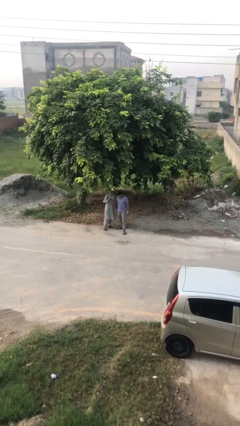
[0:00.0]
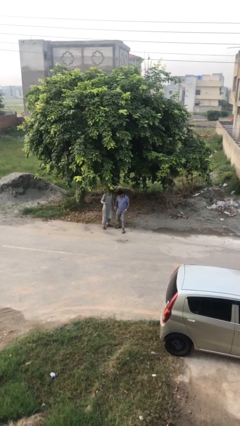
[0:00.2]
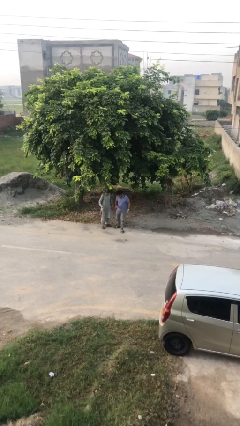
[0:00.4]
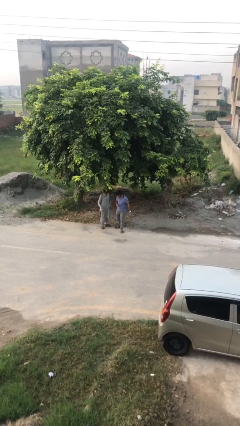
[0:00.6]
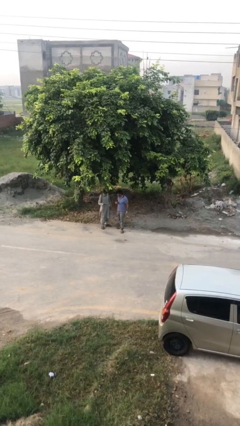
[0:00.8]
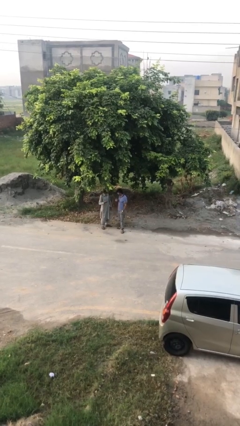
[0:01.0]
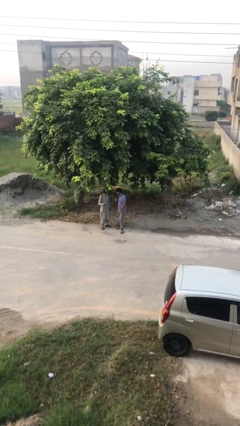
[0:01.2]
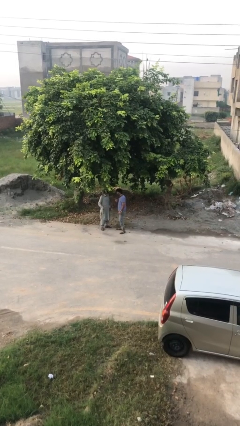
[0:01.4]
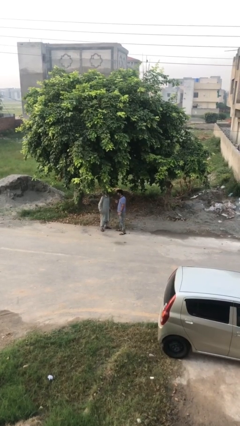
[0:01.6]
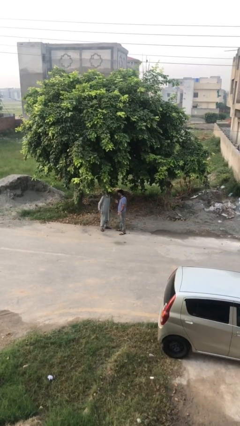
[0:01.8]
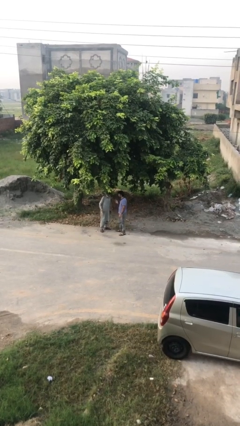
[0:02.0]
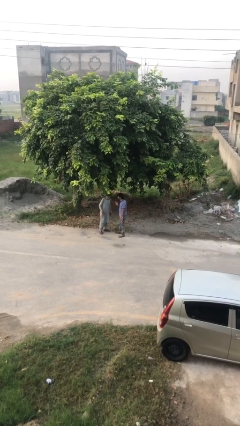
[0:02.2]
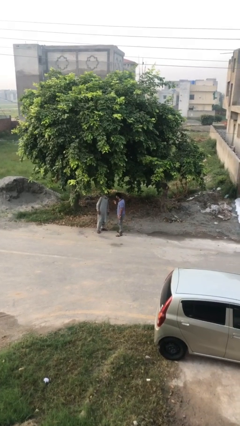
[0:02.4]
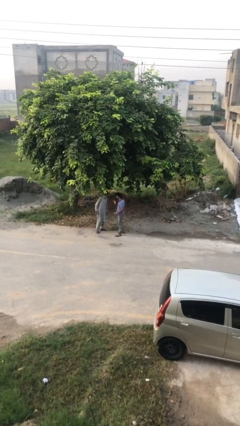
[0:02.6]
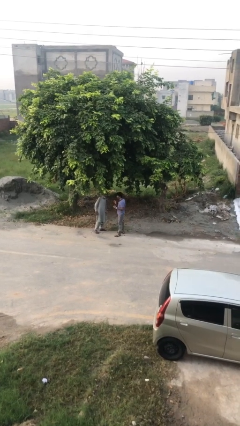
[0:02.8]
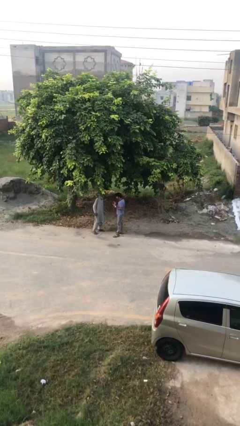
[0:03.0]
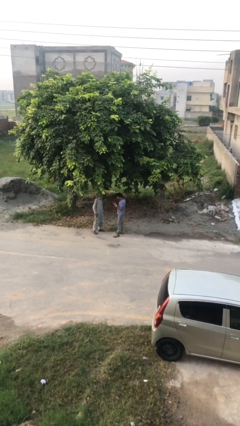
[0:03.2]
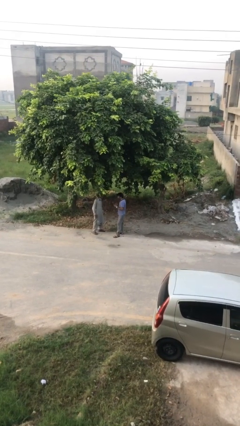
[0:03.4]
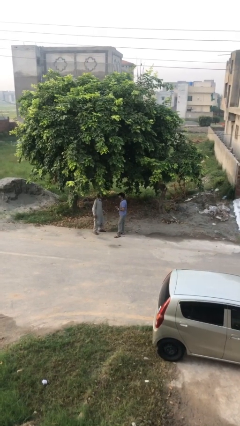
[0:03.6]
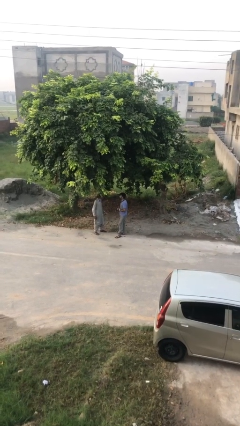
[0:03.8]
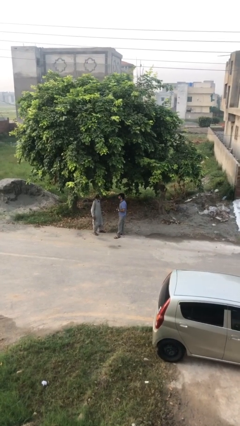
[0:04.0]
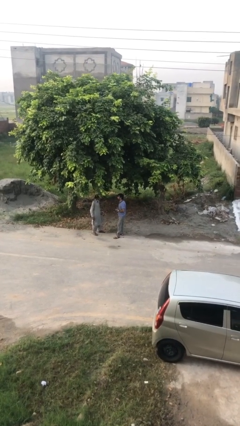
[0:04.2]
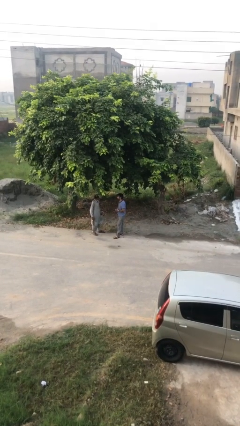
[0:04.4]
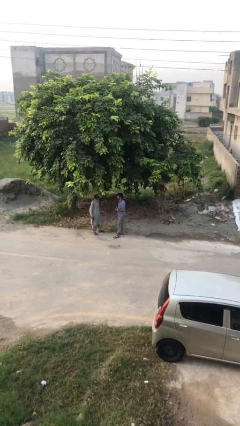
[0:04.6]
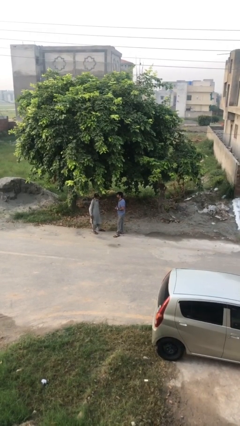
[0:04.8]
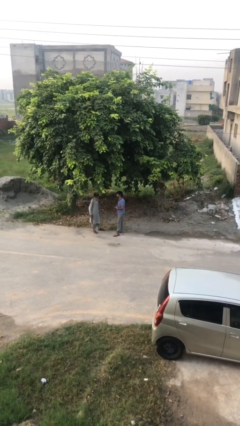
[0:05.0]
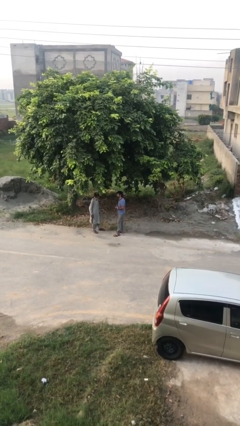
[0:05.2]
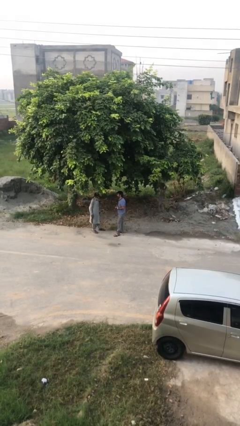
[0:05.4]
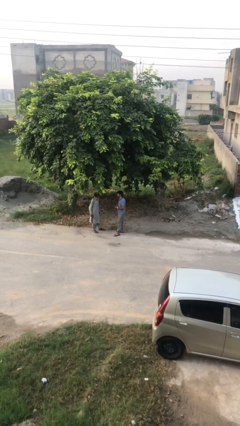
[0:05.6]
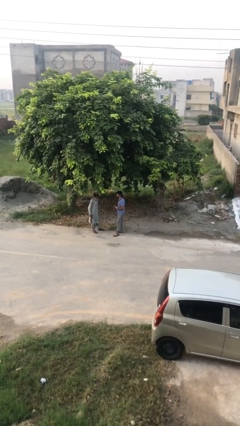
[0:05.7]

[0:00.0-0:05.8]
person talks to person

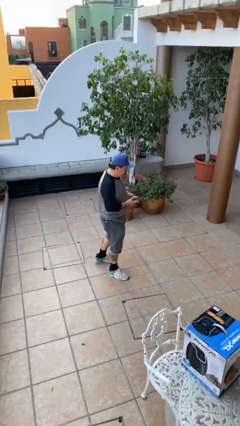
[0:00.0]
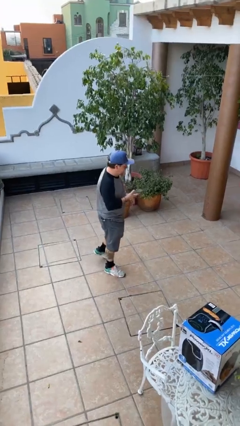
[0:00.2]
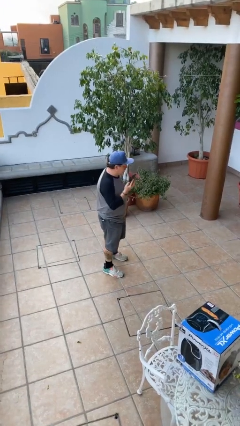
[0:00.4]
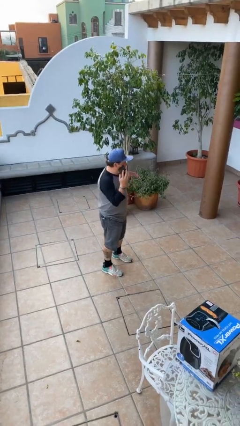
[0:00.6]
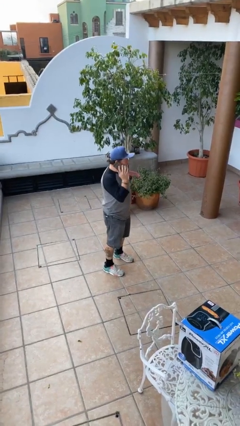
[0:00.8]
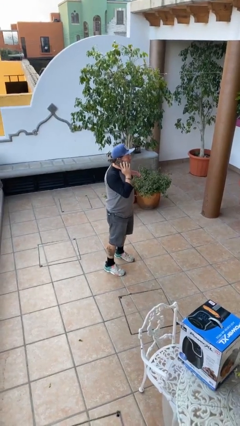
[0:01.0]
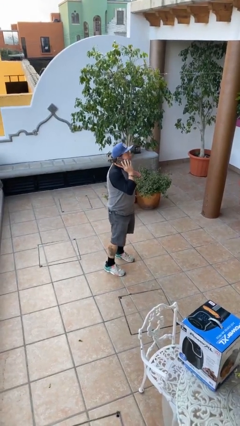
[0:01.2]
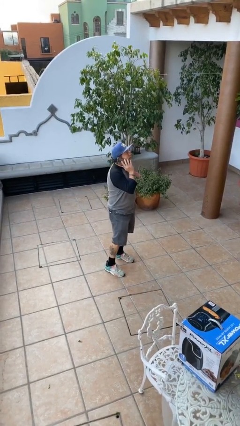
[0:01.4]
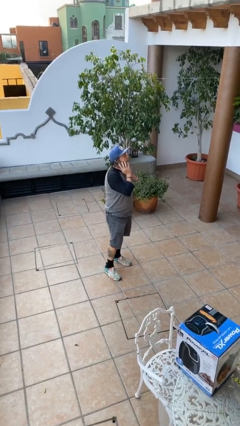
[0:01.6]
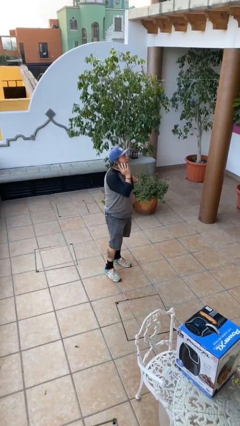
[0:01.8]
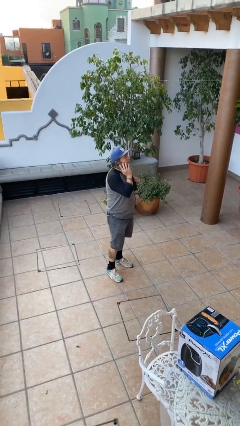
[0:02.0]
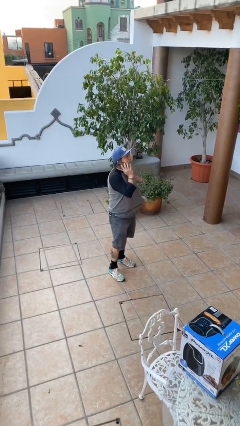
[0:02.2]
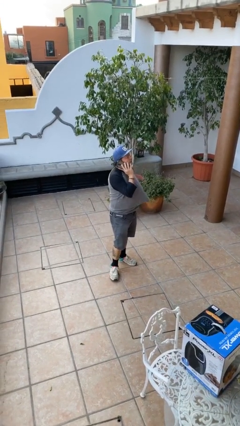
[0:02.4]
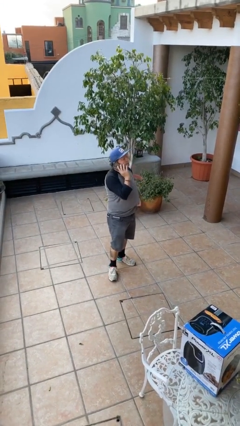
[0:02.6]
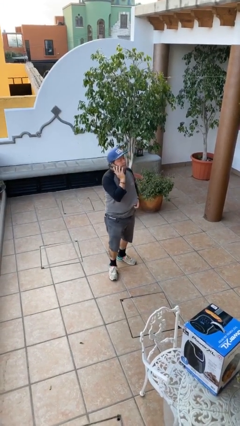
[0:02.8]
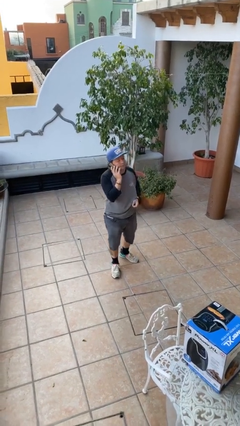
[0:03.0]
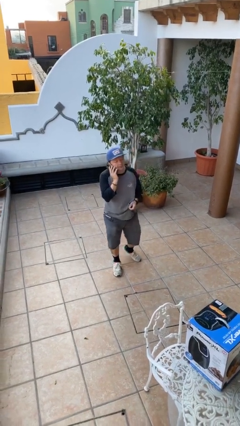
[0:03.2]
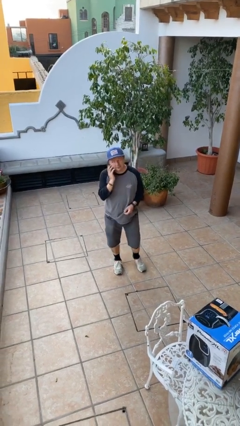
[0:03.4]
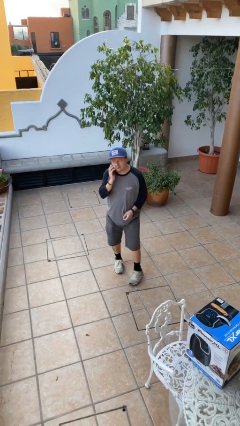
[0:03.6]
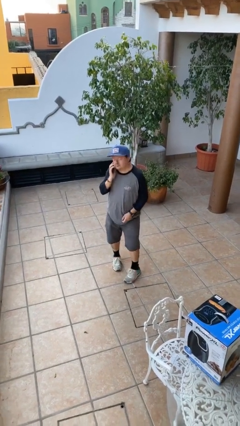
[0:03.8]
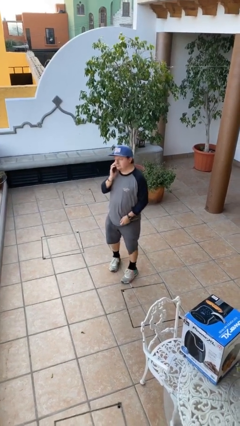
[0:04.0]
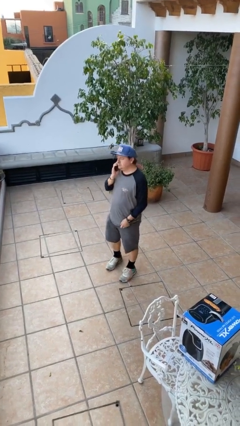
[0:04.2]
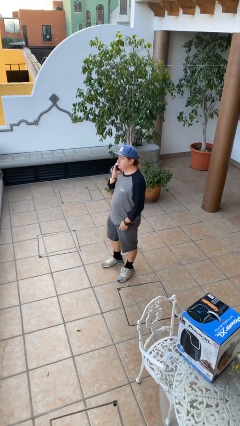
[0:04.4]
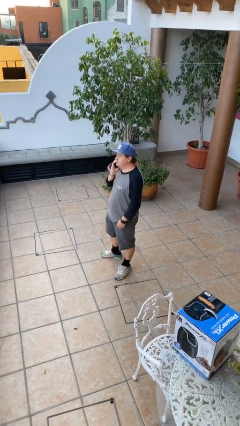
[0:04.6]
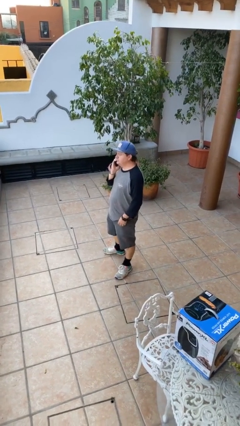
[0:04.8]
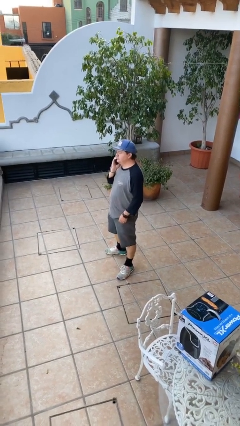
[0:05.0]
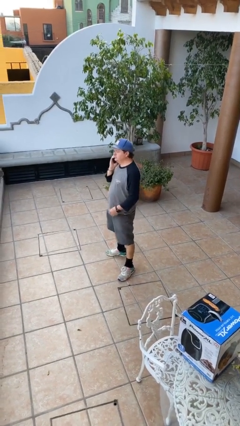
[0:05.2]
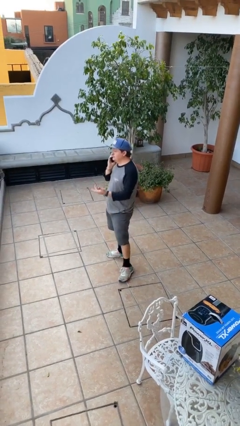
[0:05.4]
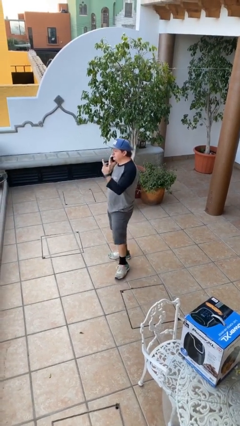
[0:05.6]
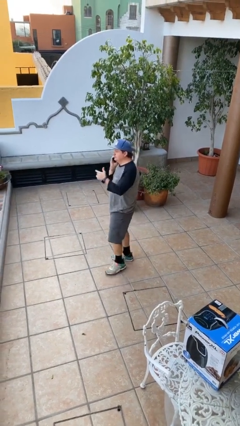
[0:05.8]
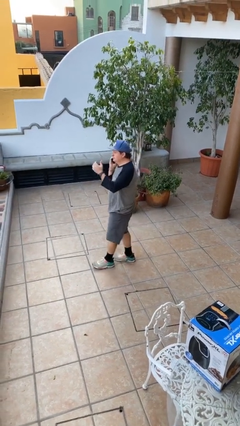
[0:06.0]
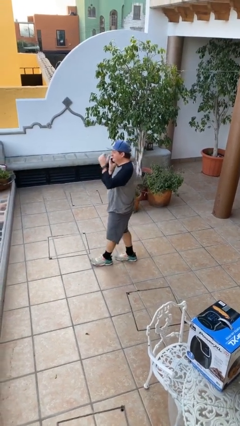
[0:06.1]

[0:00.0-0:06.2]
person talks on phone

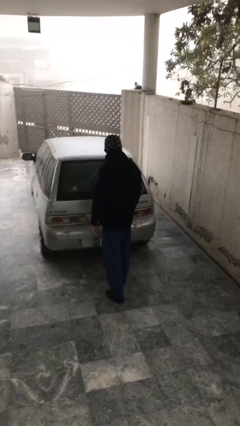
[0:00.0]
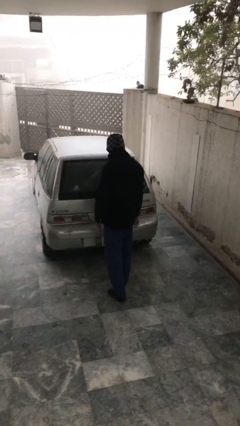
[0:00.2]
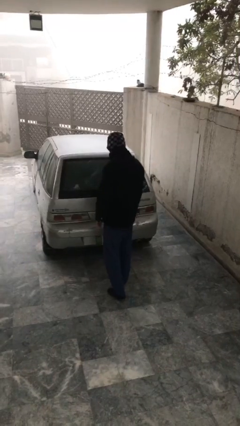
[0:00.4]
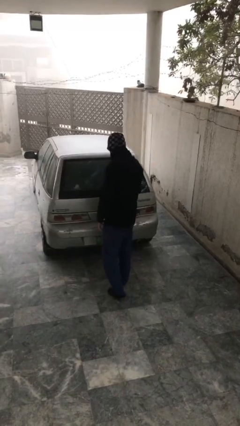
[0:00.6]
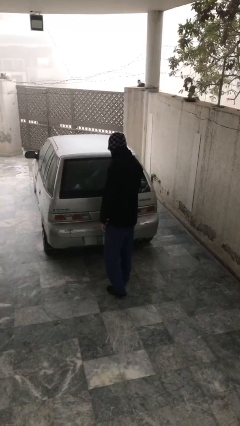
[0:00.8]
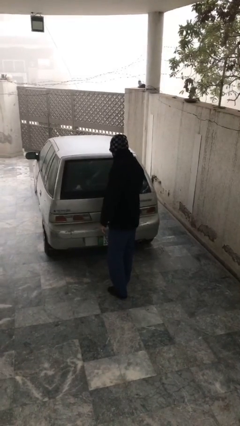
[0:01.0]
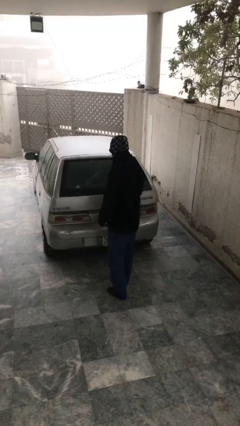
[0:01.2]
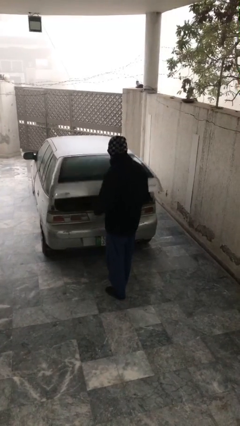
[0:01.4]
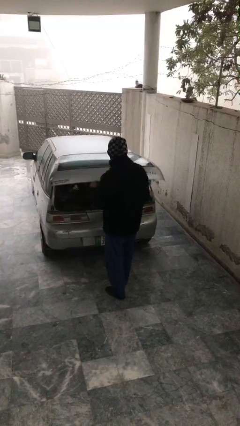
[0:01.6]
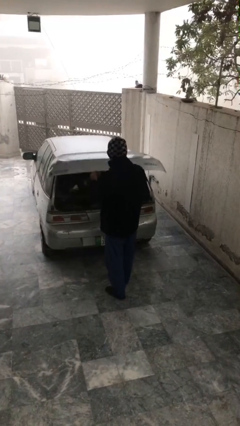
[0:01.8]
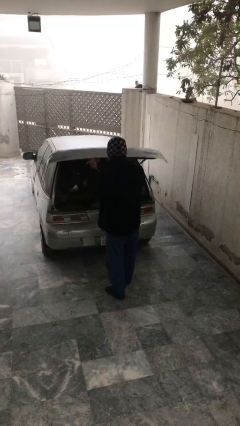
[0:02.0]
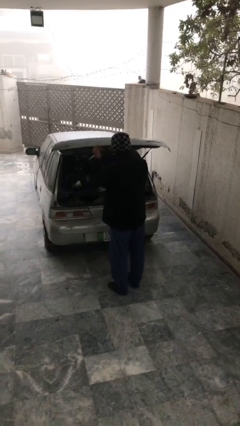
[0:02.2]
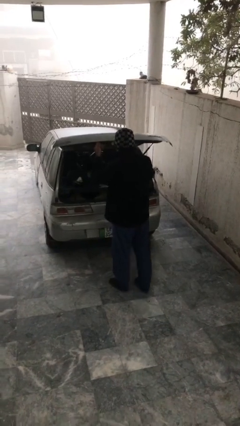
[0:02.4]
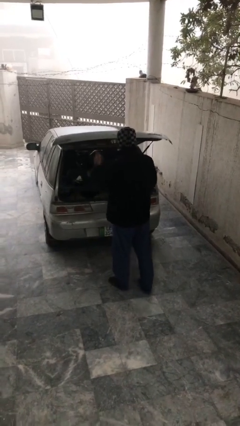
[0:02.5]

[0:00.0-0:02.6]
person opens car trunk

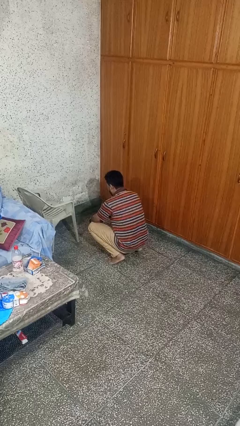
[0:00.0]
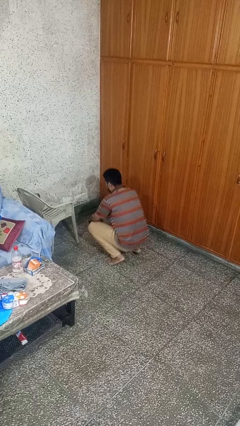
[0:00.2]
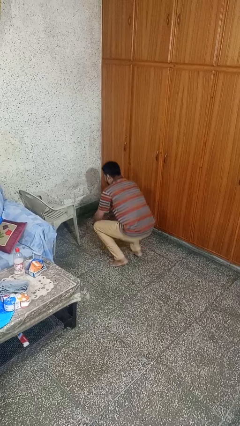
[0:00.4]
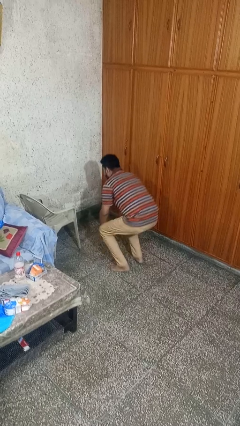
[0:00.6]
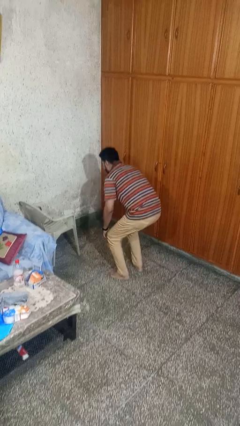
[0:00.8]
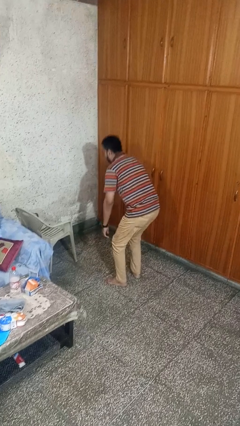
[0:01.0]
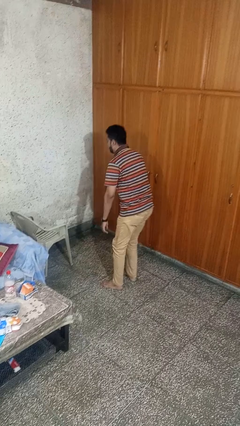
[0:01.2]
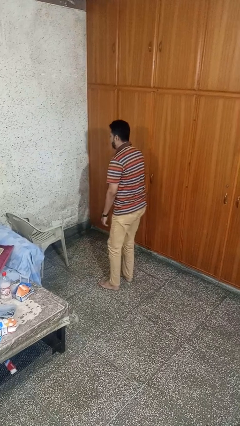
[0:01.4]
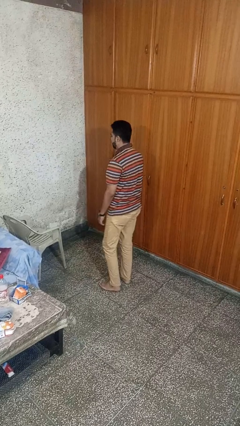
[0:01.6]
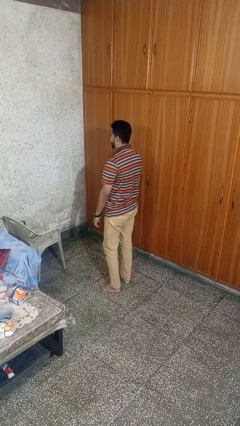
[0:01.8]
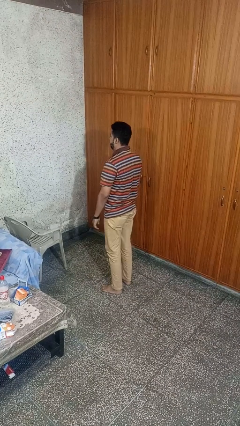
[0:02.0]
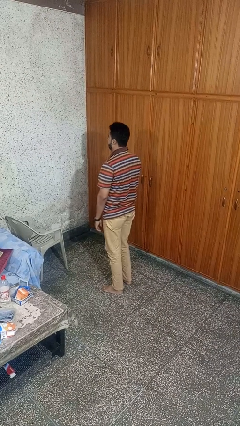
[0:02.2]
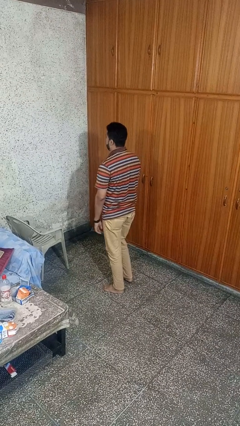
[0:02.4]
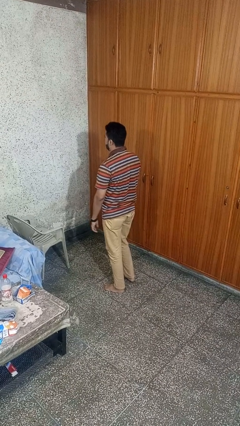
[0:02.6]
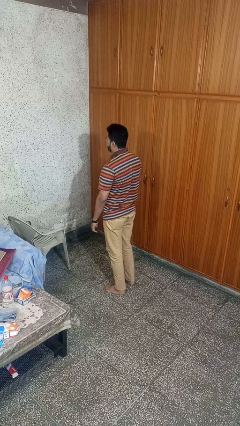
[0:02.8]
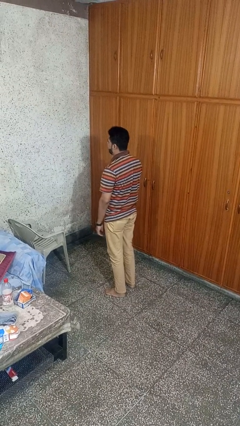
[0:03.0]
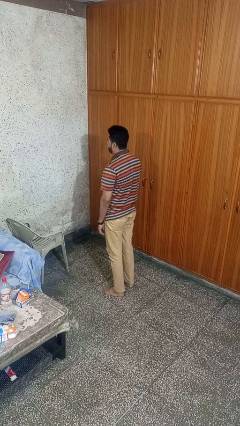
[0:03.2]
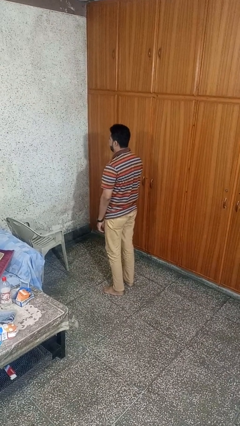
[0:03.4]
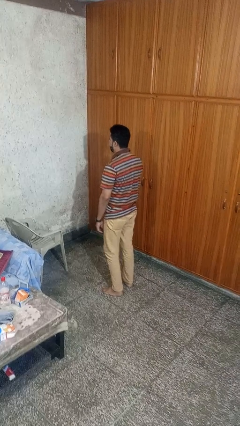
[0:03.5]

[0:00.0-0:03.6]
person stands up
